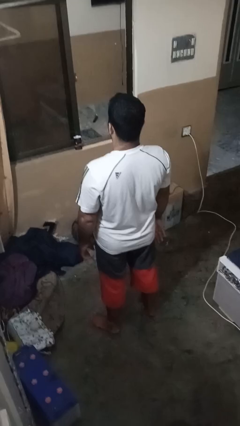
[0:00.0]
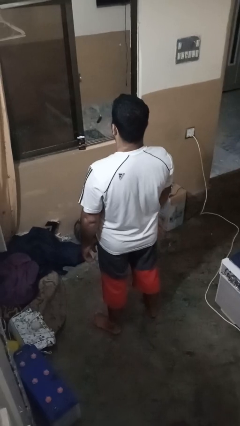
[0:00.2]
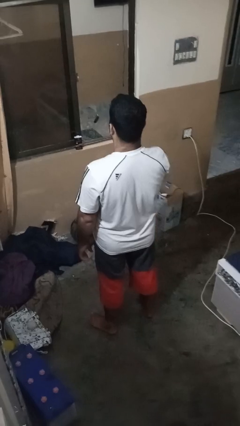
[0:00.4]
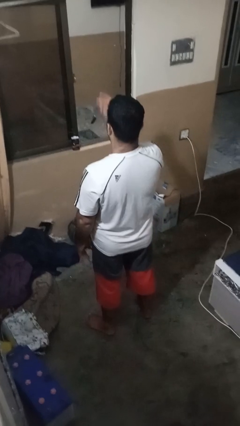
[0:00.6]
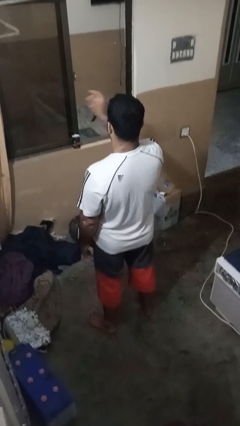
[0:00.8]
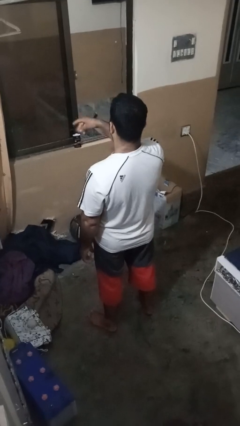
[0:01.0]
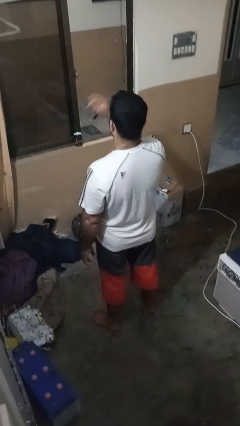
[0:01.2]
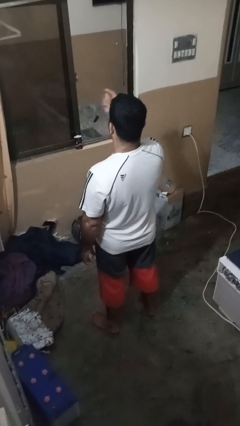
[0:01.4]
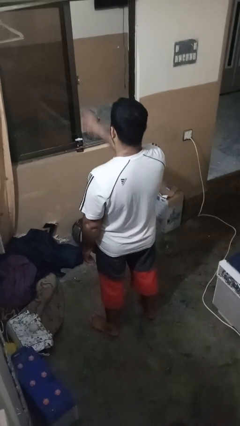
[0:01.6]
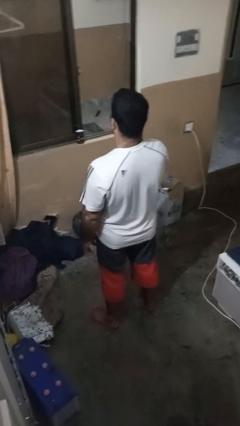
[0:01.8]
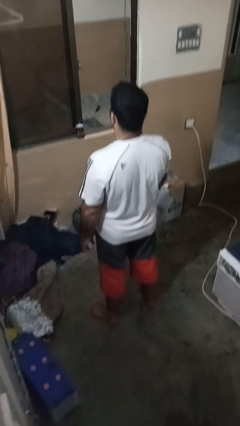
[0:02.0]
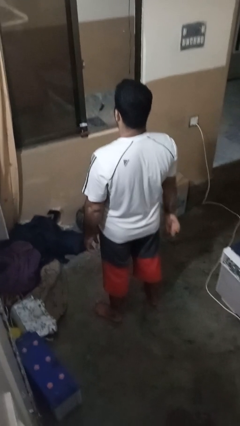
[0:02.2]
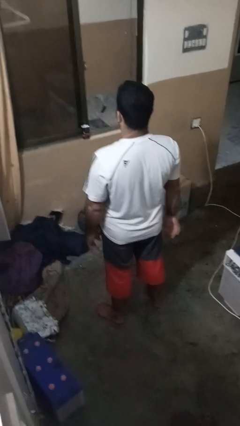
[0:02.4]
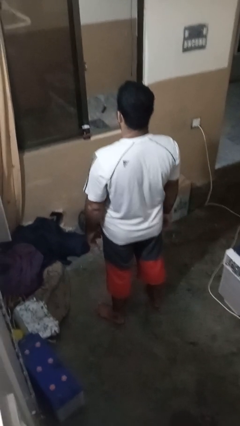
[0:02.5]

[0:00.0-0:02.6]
person snaps fingers

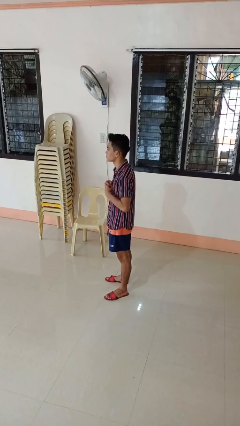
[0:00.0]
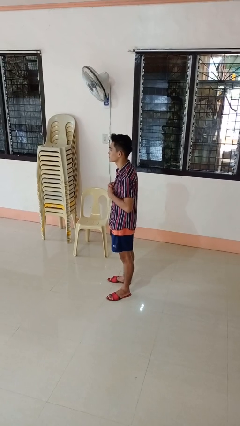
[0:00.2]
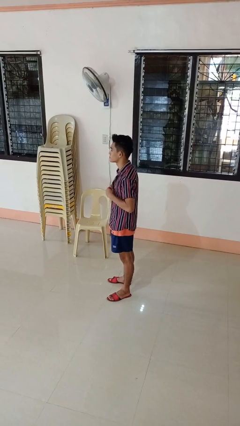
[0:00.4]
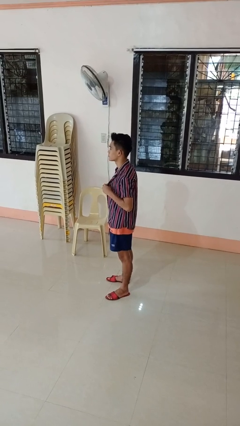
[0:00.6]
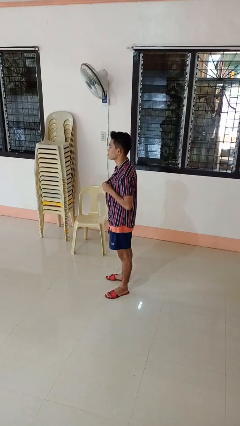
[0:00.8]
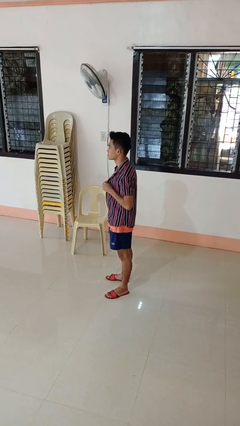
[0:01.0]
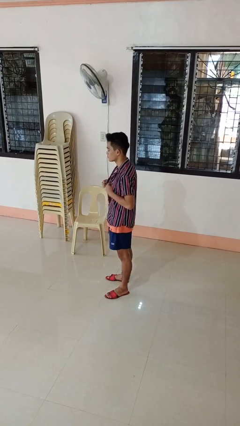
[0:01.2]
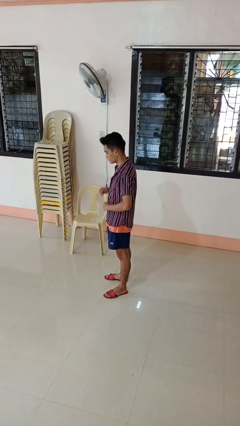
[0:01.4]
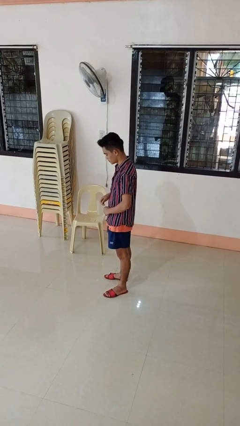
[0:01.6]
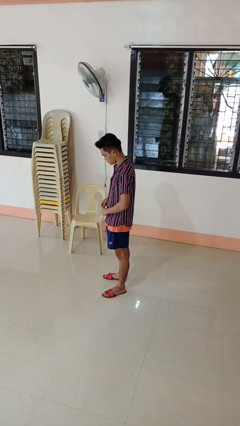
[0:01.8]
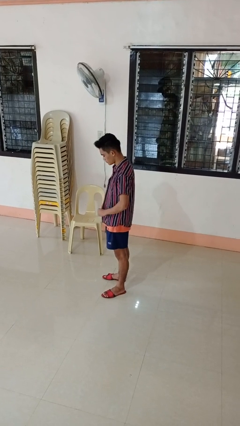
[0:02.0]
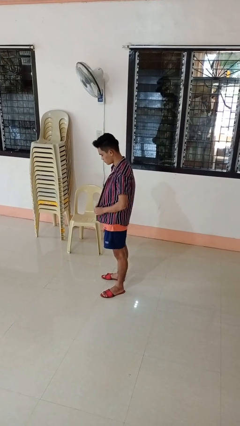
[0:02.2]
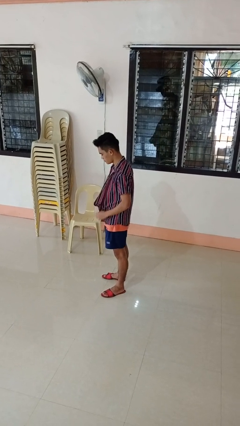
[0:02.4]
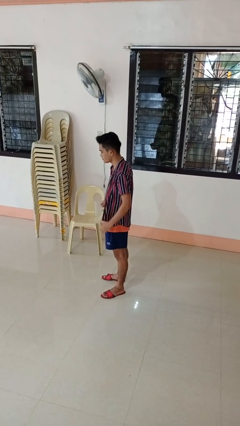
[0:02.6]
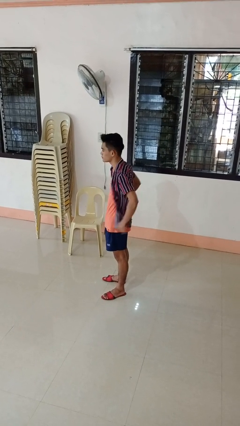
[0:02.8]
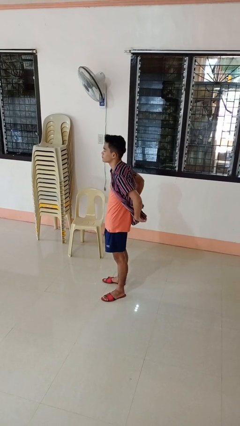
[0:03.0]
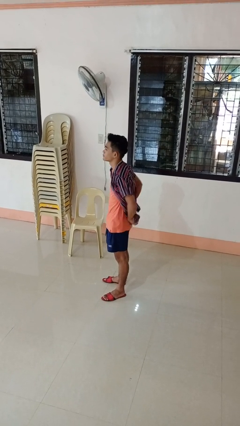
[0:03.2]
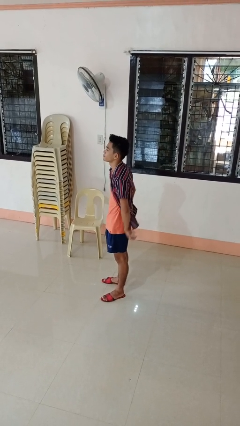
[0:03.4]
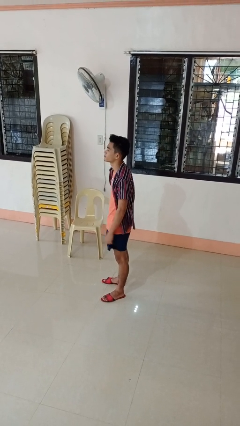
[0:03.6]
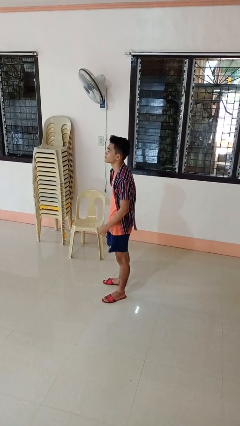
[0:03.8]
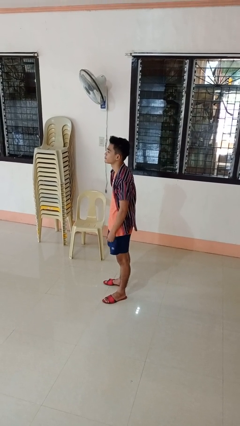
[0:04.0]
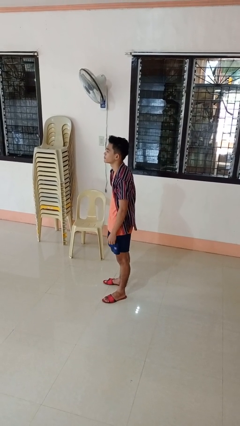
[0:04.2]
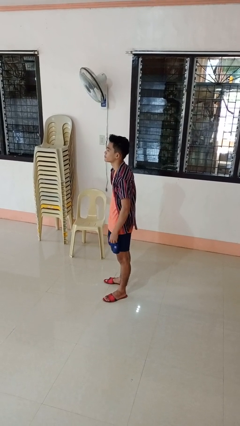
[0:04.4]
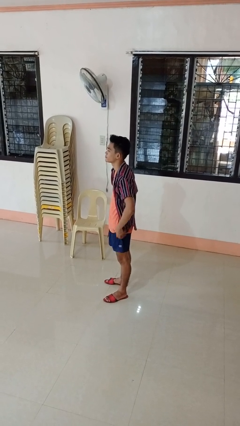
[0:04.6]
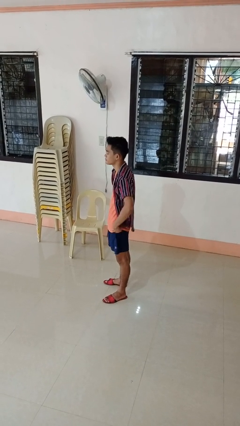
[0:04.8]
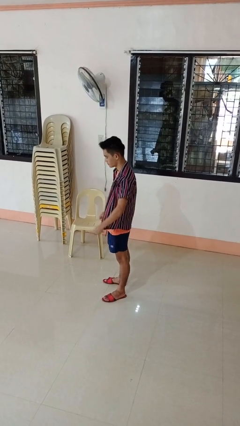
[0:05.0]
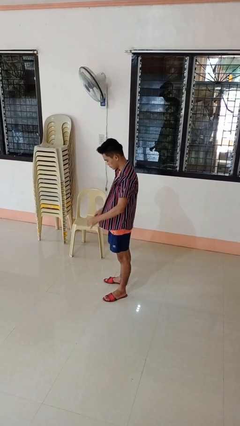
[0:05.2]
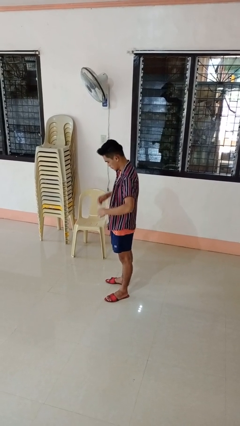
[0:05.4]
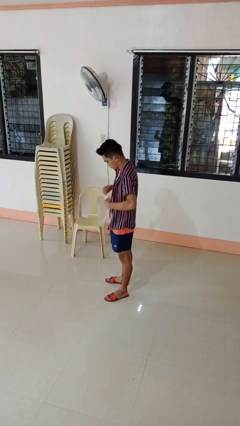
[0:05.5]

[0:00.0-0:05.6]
person unbuttons shirt

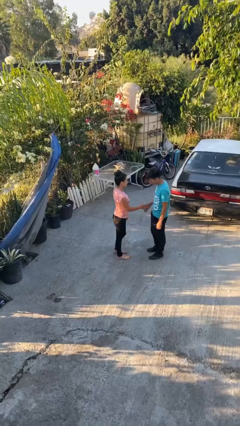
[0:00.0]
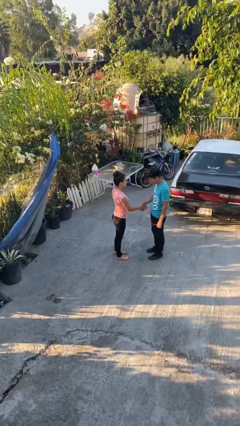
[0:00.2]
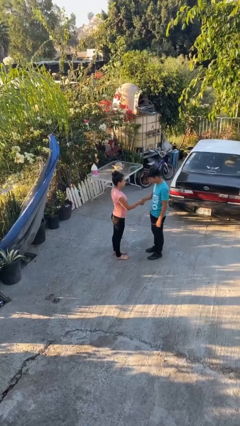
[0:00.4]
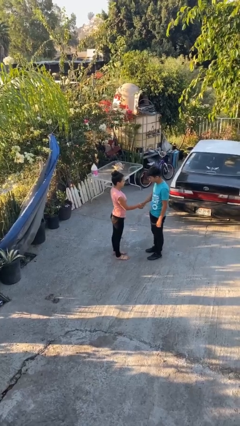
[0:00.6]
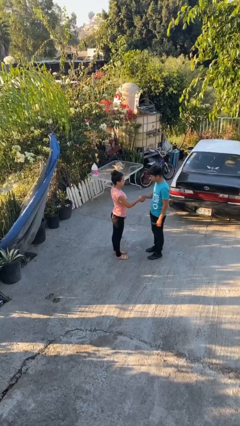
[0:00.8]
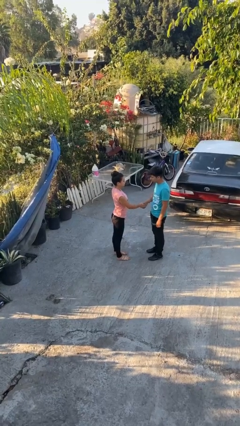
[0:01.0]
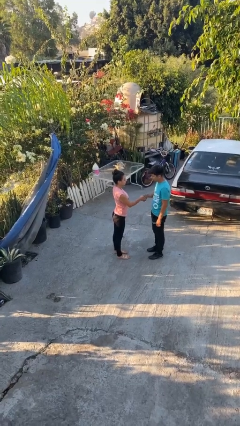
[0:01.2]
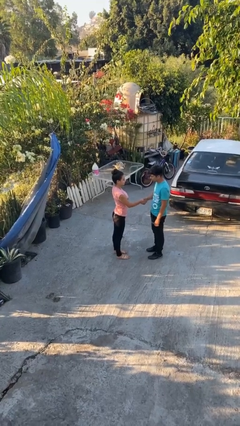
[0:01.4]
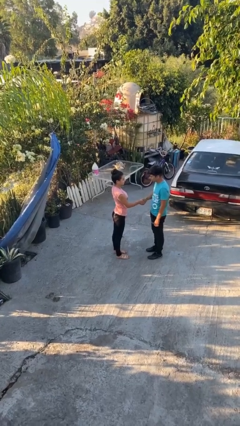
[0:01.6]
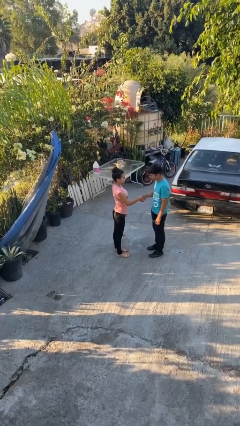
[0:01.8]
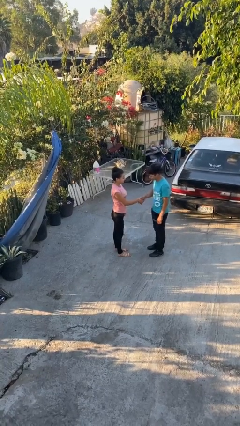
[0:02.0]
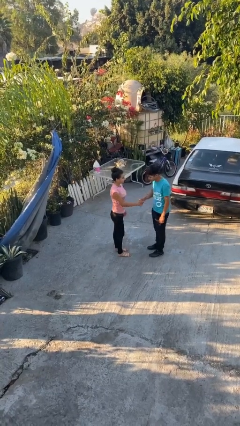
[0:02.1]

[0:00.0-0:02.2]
person shakes hand

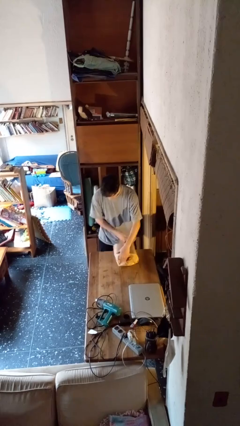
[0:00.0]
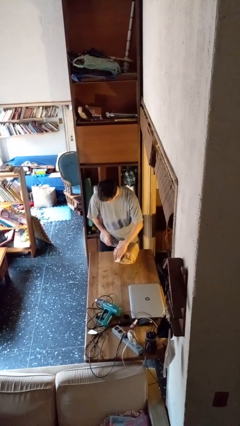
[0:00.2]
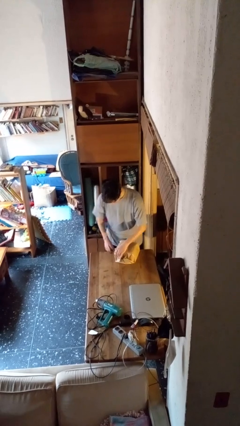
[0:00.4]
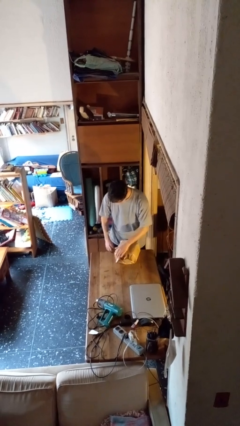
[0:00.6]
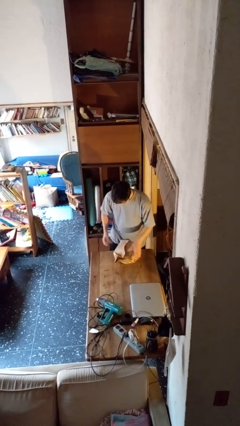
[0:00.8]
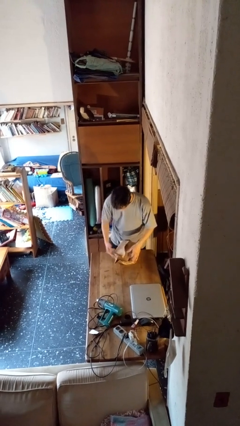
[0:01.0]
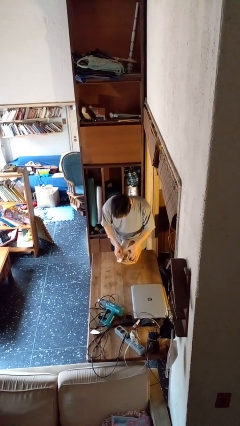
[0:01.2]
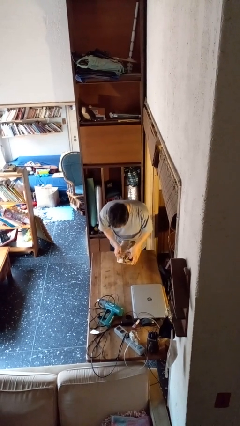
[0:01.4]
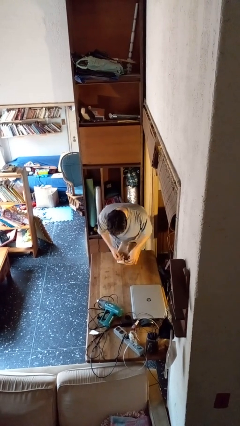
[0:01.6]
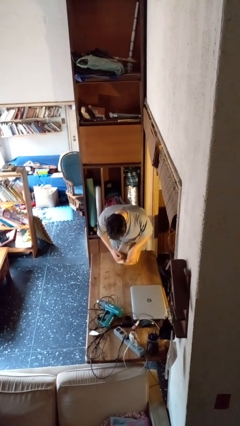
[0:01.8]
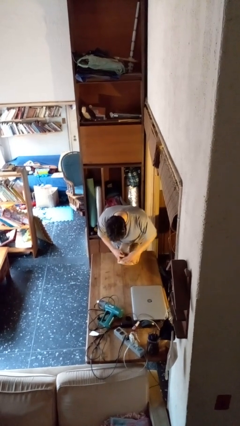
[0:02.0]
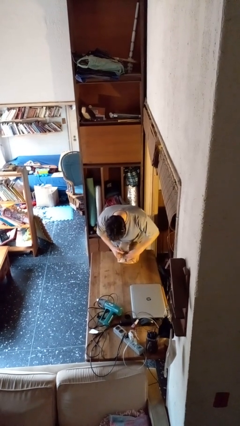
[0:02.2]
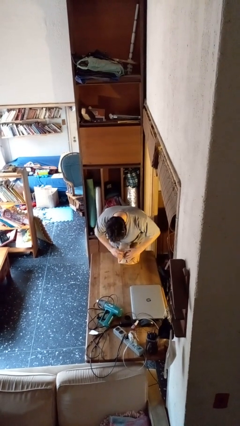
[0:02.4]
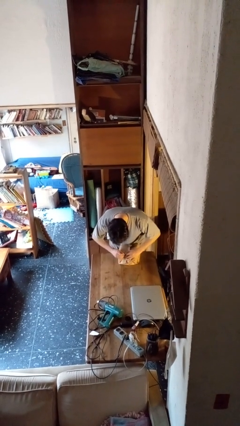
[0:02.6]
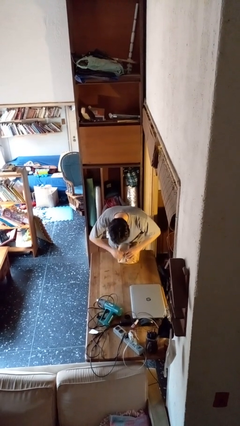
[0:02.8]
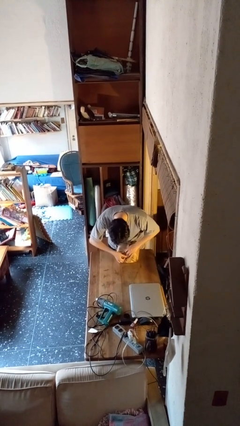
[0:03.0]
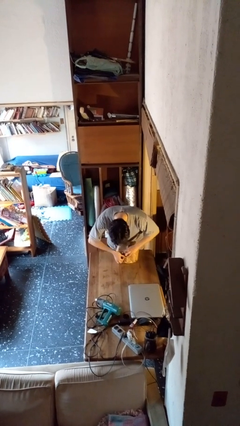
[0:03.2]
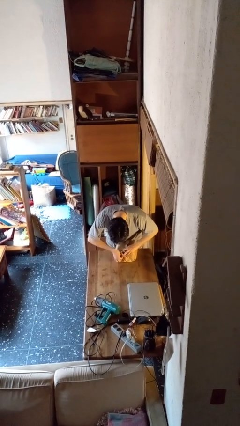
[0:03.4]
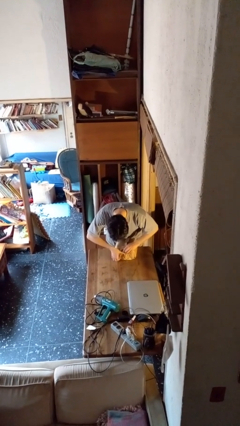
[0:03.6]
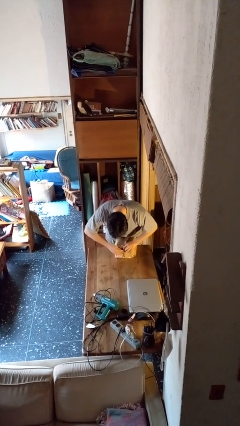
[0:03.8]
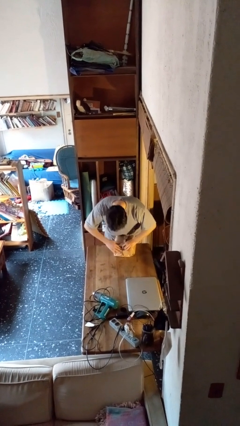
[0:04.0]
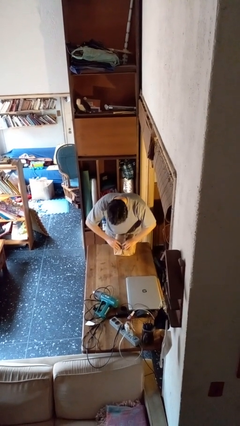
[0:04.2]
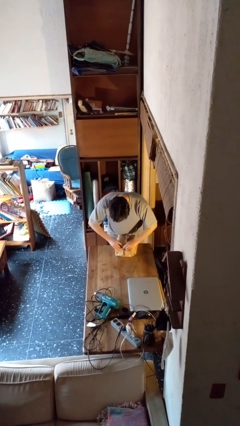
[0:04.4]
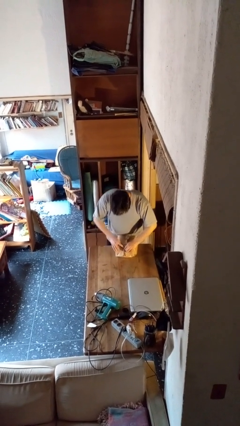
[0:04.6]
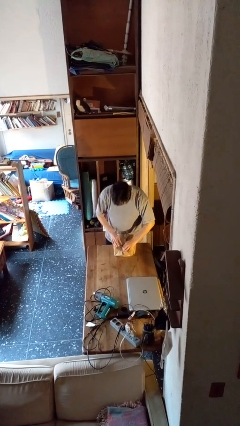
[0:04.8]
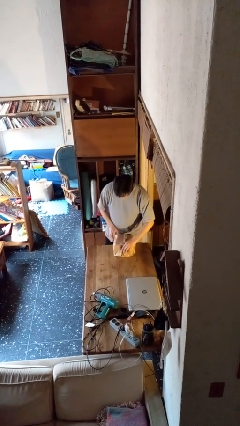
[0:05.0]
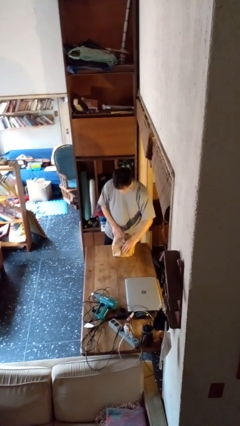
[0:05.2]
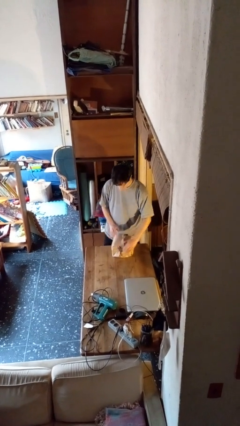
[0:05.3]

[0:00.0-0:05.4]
person wraps box

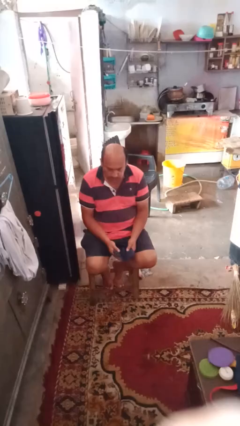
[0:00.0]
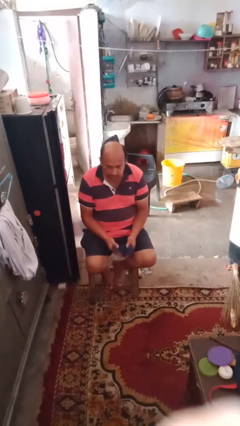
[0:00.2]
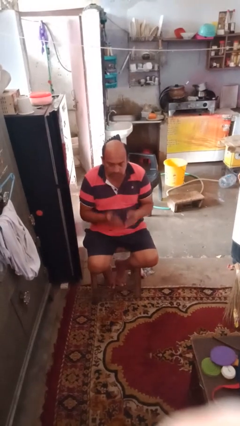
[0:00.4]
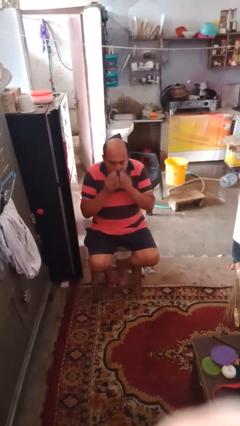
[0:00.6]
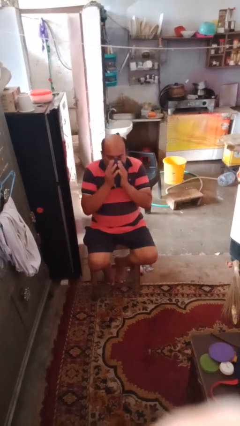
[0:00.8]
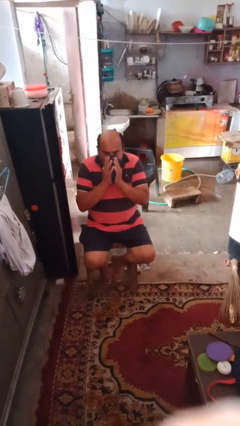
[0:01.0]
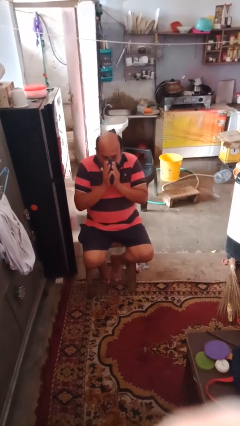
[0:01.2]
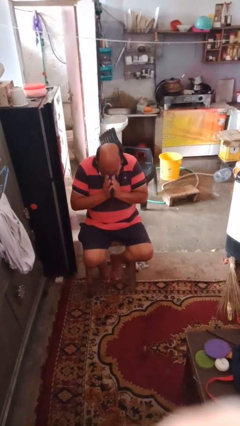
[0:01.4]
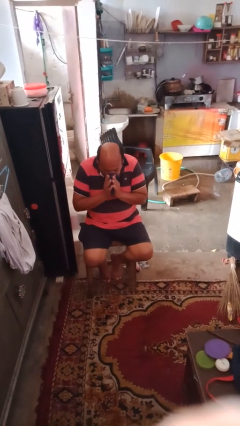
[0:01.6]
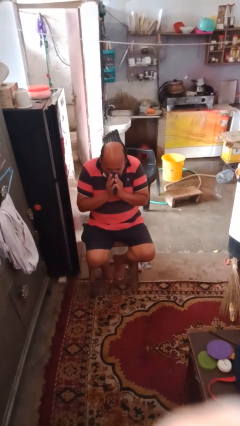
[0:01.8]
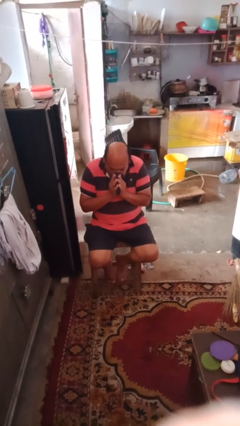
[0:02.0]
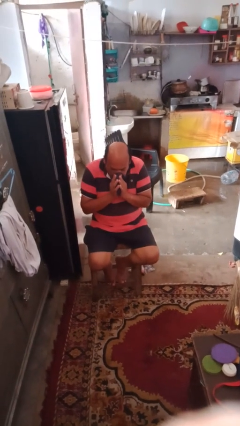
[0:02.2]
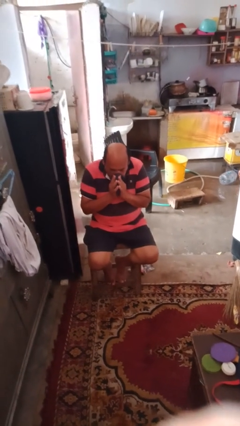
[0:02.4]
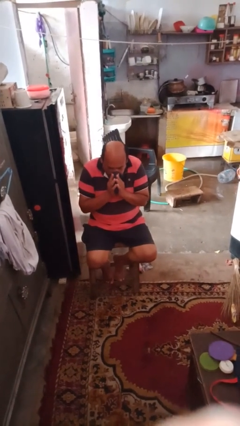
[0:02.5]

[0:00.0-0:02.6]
person blows nose
